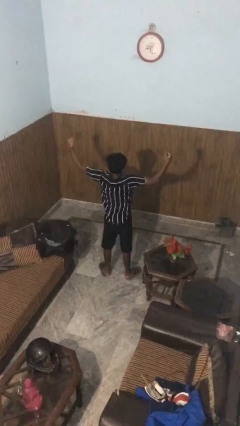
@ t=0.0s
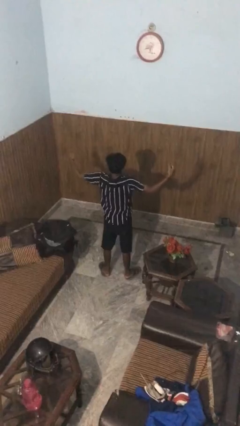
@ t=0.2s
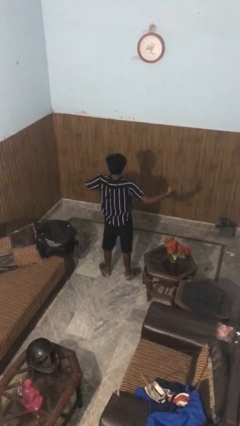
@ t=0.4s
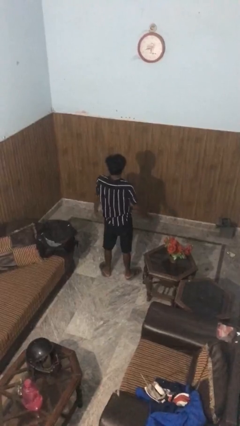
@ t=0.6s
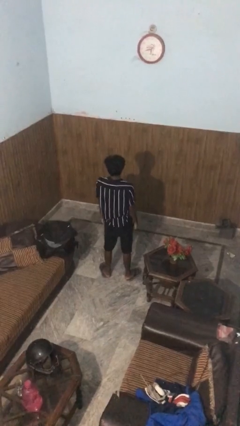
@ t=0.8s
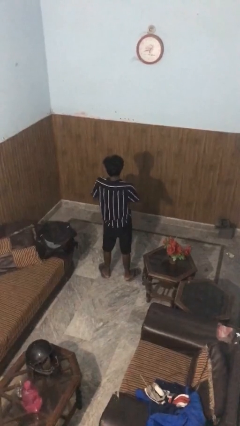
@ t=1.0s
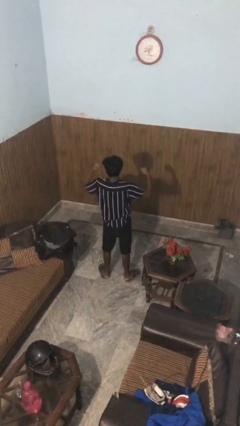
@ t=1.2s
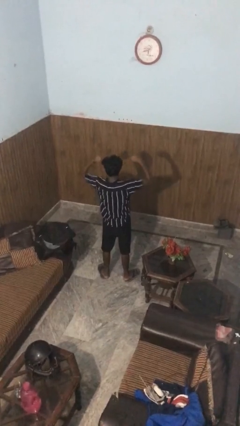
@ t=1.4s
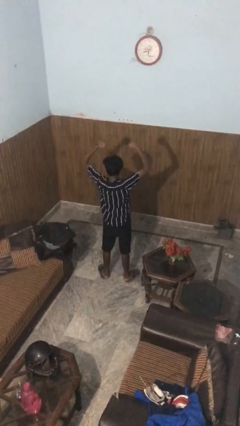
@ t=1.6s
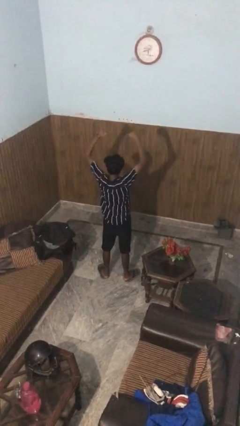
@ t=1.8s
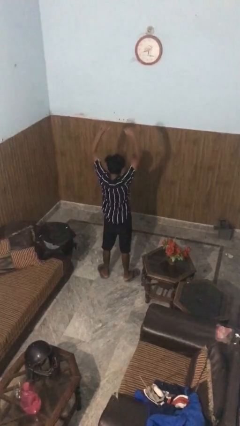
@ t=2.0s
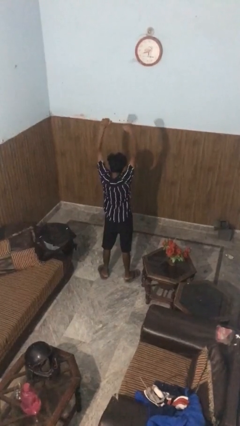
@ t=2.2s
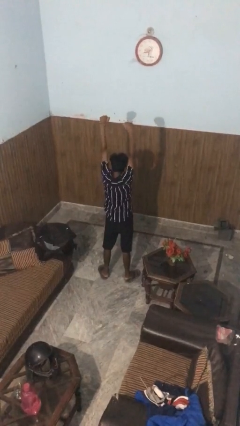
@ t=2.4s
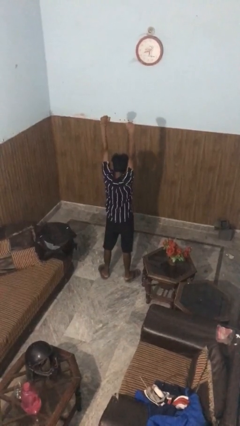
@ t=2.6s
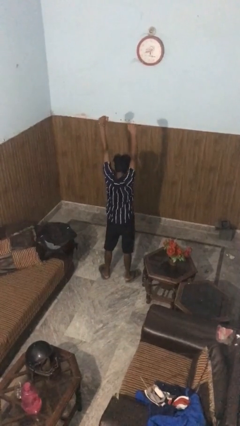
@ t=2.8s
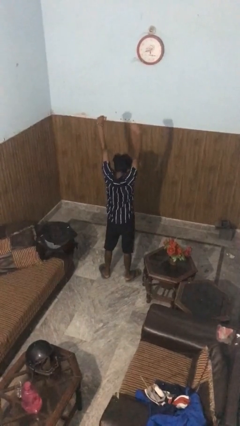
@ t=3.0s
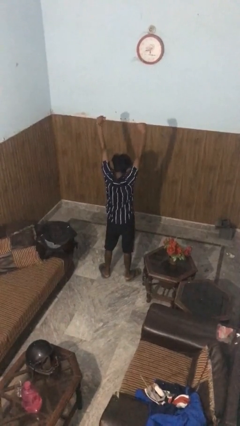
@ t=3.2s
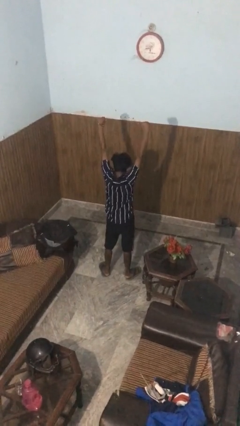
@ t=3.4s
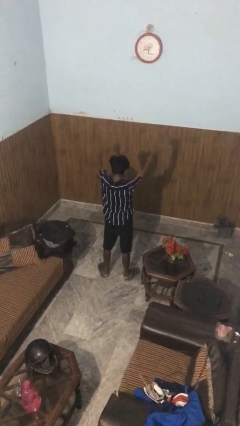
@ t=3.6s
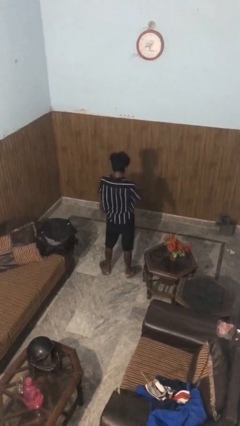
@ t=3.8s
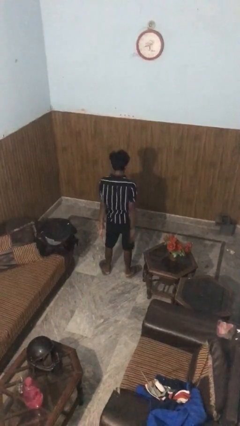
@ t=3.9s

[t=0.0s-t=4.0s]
person stretches arms over head

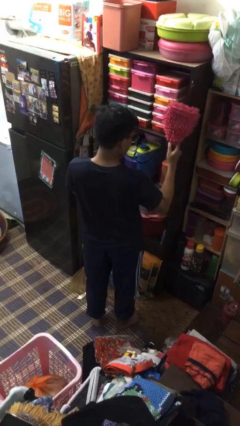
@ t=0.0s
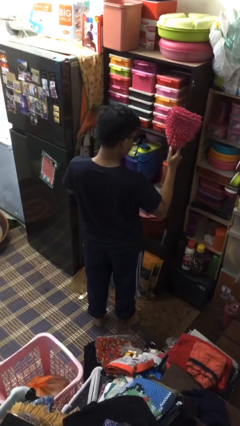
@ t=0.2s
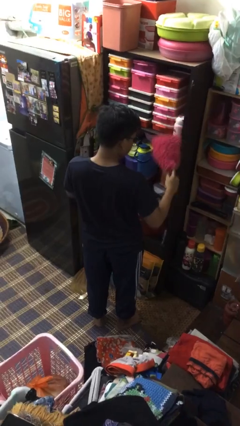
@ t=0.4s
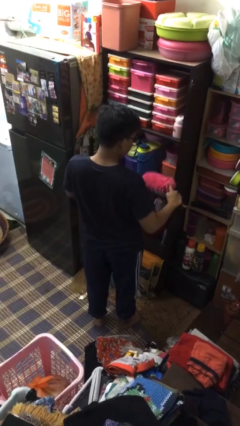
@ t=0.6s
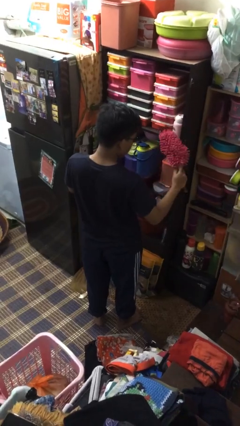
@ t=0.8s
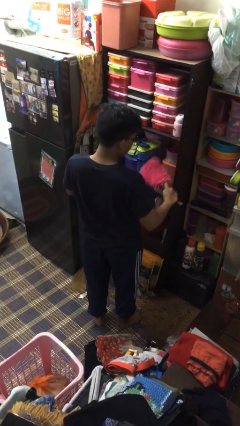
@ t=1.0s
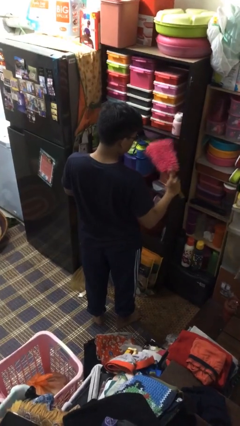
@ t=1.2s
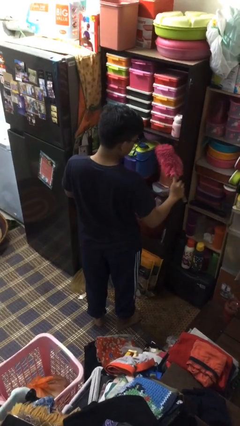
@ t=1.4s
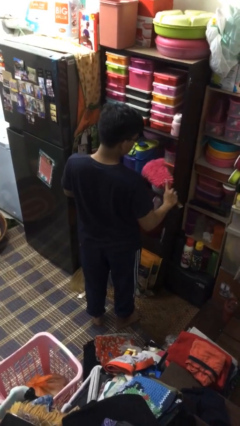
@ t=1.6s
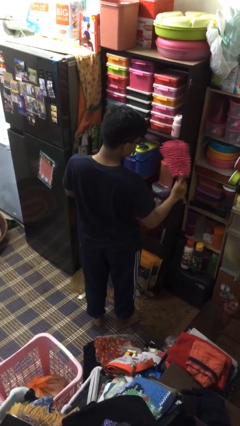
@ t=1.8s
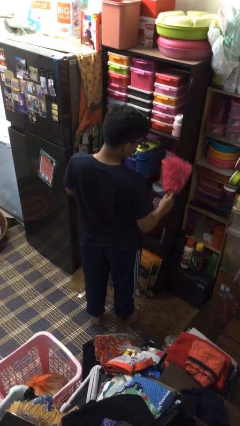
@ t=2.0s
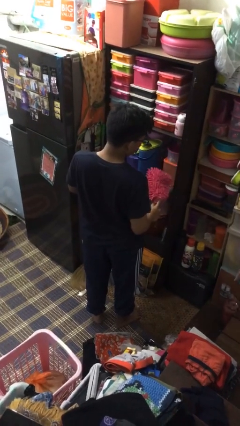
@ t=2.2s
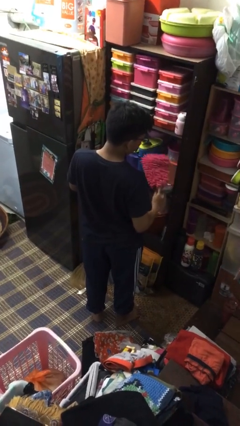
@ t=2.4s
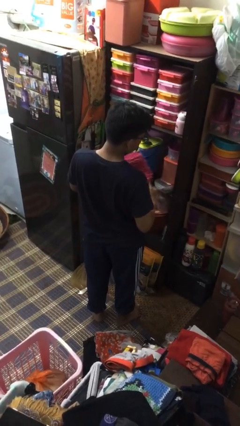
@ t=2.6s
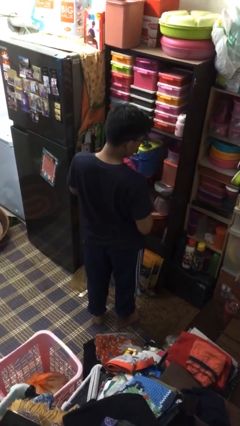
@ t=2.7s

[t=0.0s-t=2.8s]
person dusts furniture

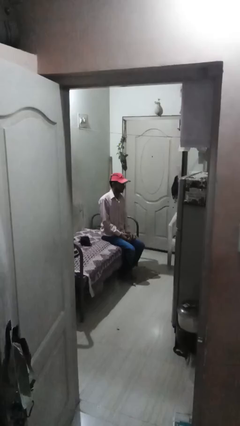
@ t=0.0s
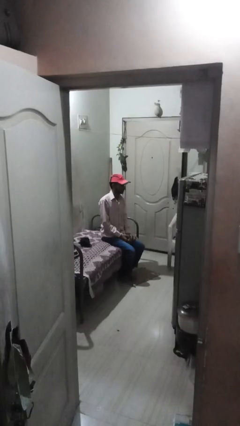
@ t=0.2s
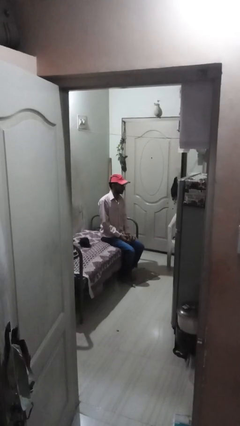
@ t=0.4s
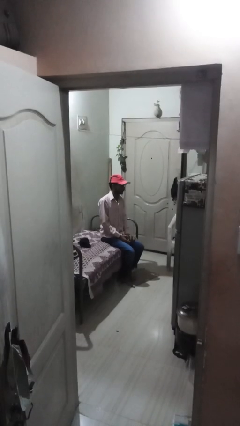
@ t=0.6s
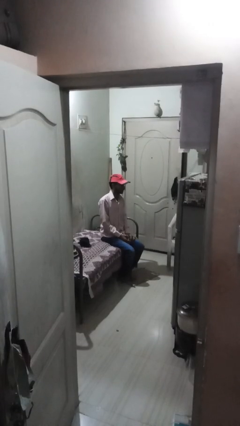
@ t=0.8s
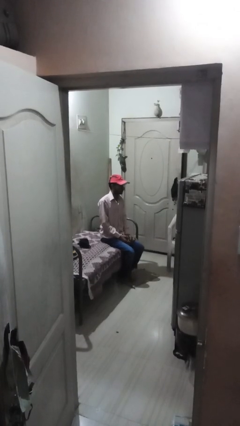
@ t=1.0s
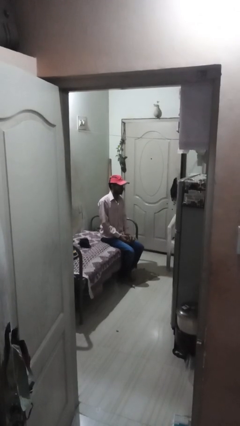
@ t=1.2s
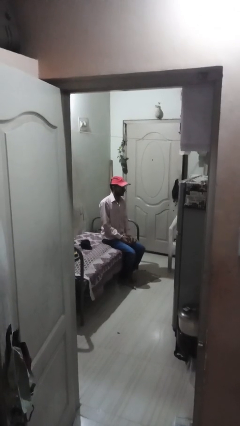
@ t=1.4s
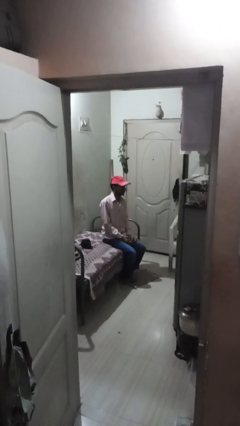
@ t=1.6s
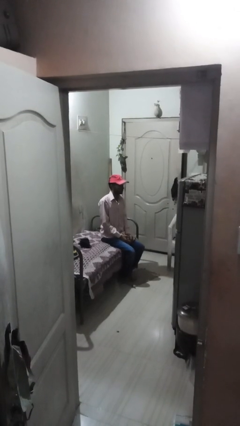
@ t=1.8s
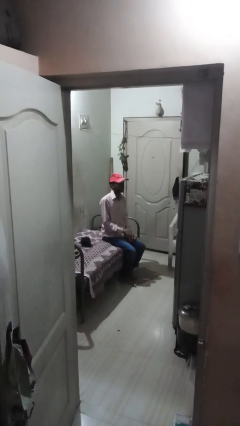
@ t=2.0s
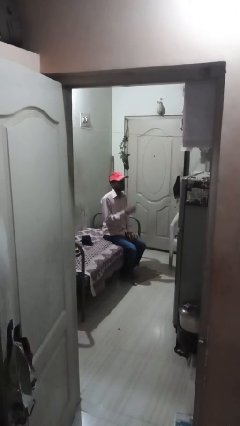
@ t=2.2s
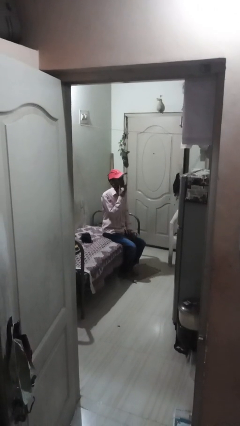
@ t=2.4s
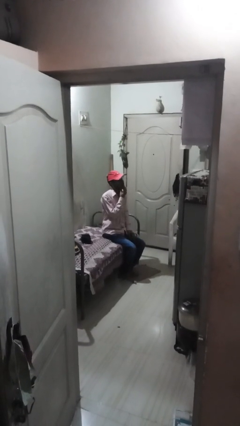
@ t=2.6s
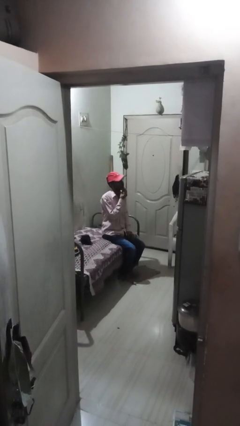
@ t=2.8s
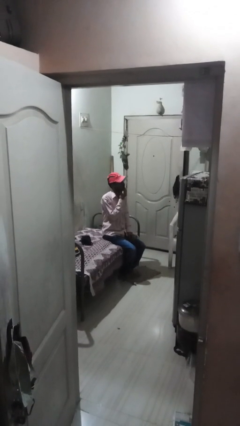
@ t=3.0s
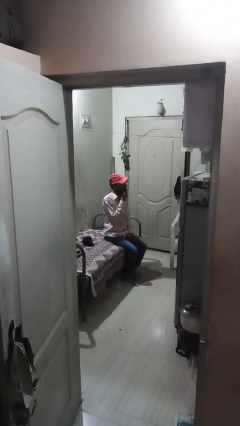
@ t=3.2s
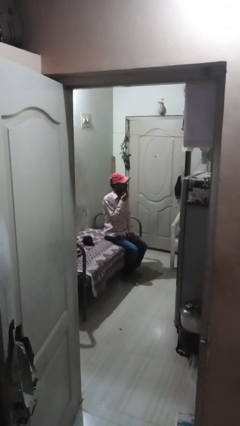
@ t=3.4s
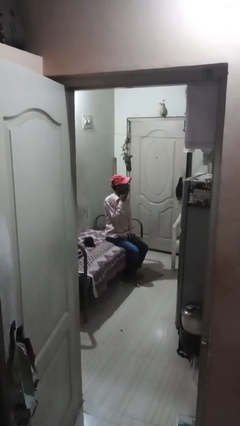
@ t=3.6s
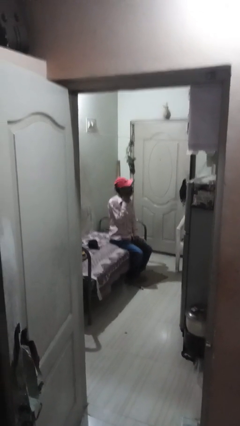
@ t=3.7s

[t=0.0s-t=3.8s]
person strokes chin

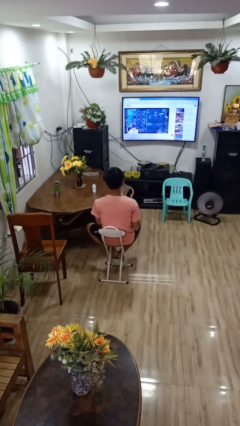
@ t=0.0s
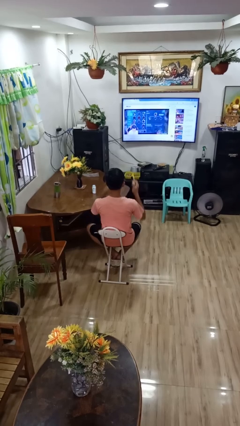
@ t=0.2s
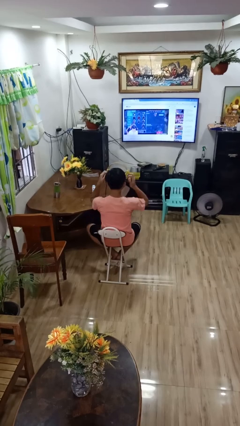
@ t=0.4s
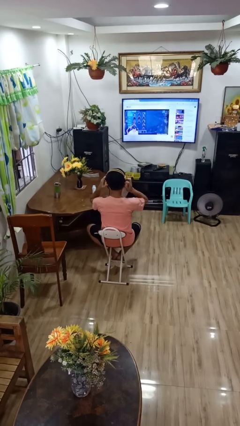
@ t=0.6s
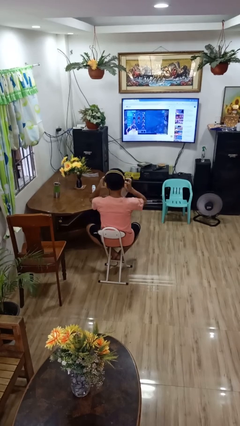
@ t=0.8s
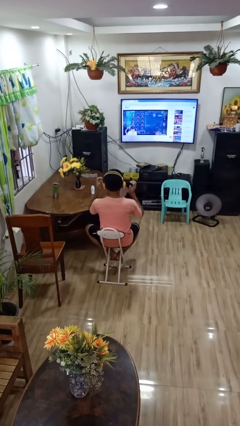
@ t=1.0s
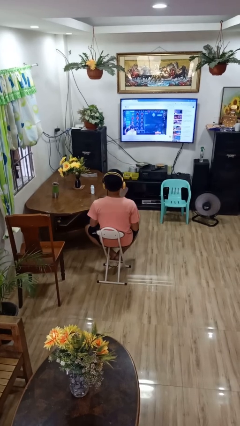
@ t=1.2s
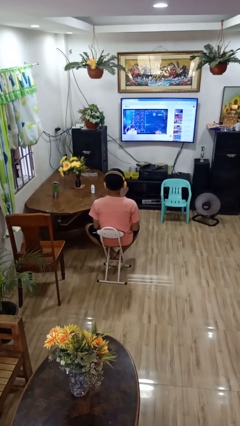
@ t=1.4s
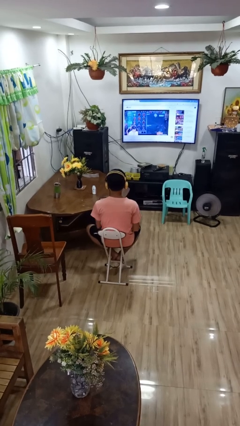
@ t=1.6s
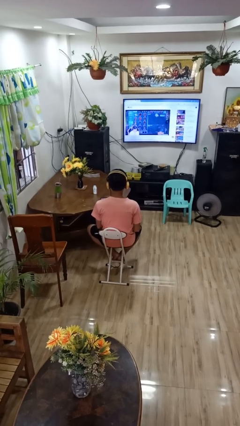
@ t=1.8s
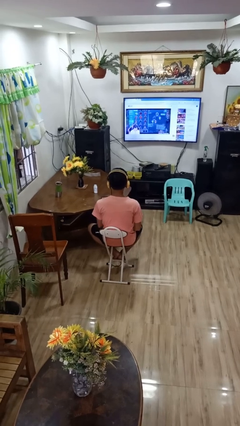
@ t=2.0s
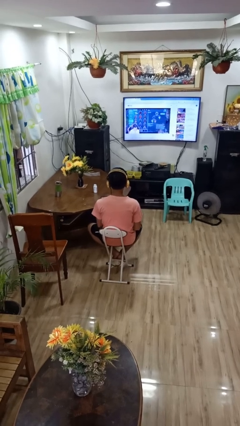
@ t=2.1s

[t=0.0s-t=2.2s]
person puts on headphones

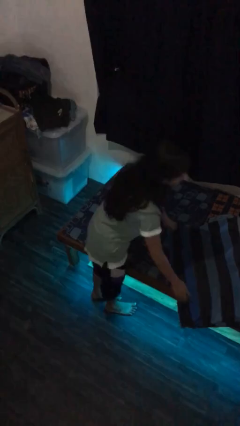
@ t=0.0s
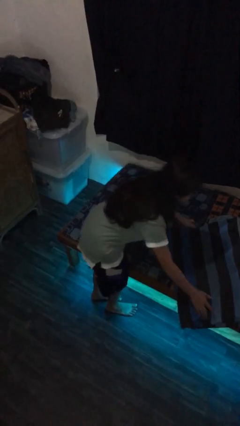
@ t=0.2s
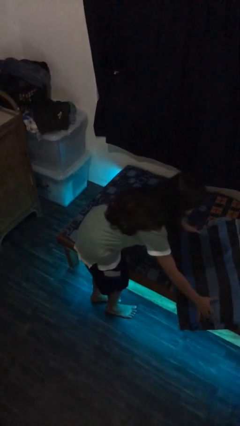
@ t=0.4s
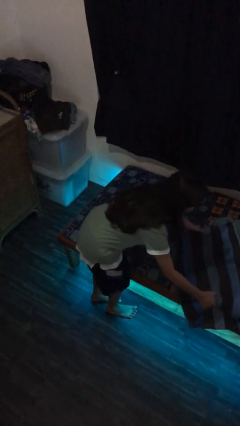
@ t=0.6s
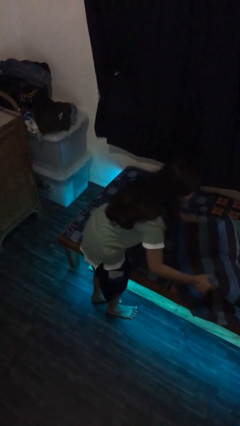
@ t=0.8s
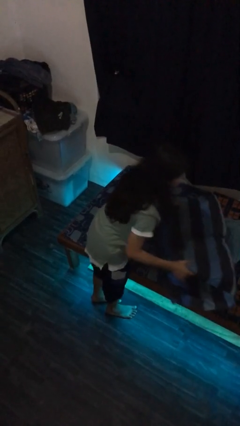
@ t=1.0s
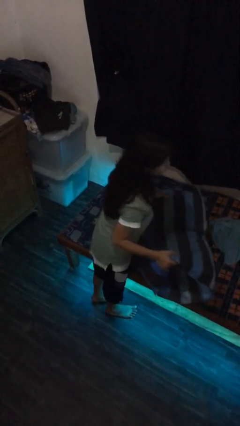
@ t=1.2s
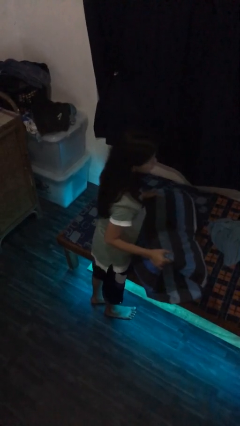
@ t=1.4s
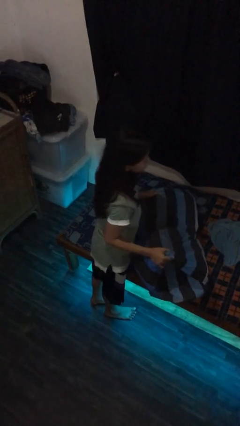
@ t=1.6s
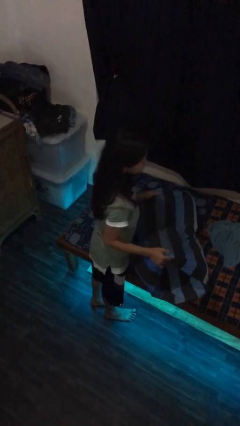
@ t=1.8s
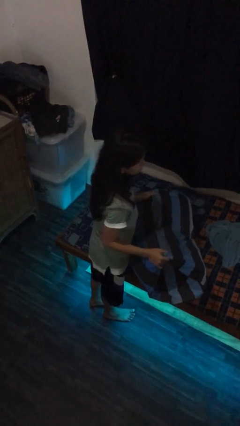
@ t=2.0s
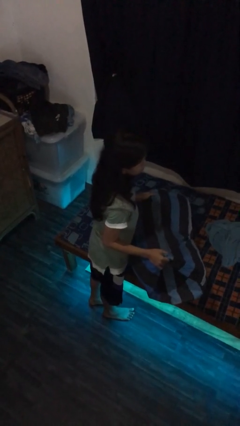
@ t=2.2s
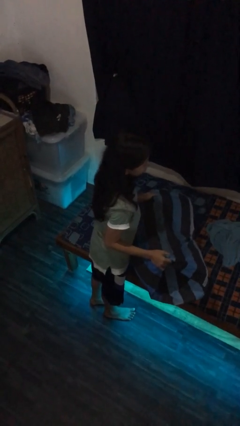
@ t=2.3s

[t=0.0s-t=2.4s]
person picks up object from bed

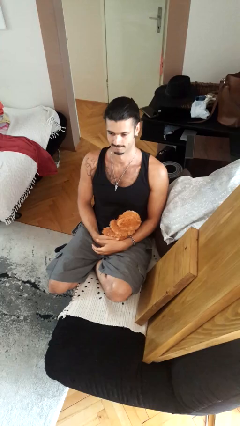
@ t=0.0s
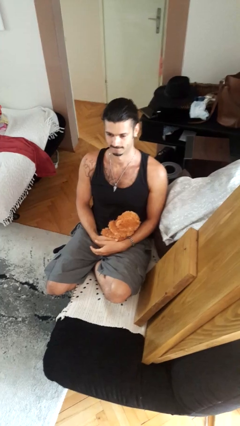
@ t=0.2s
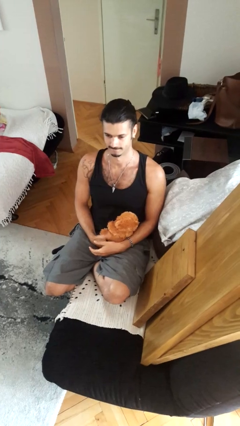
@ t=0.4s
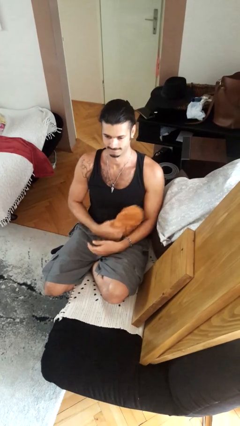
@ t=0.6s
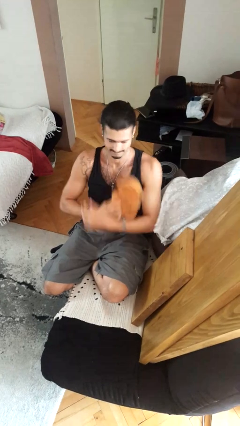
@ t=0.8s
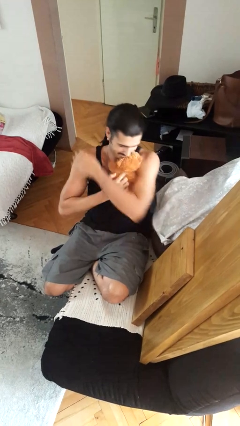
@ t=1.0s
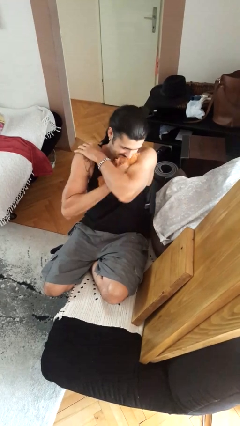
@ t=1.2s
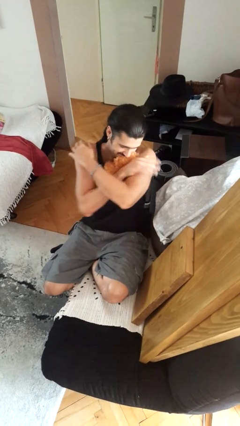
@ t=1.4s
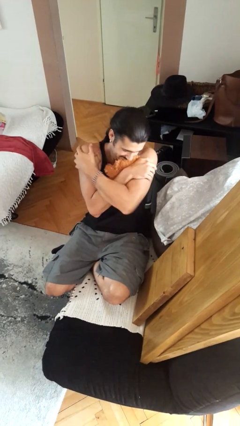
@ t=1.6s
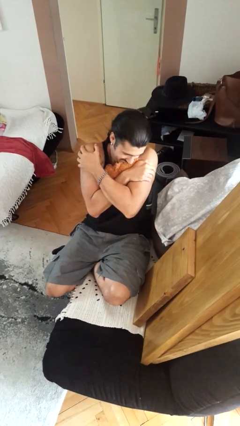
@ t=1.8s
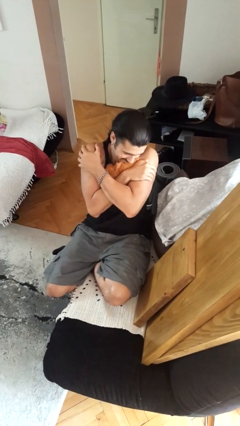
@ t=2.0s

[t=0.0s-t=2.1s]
person hugs stuffed animal
